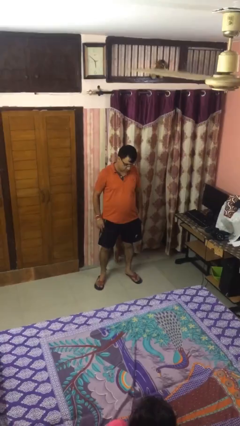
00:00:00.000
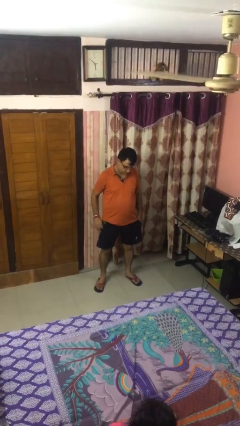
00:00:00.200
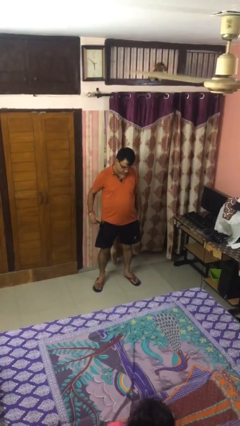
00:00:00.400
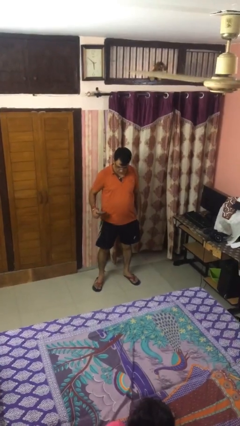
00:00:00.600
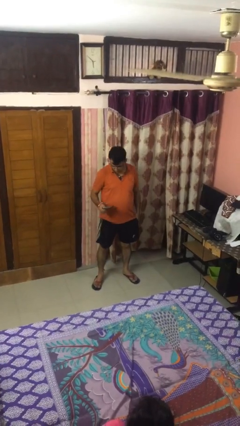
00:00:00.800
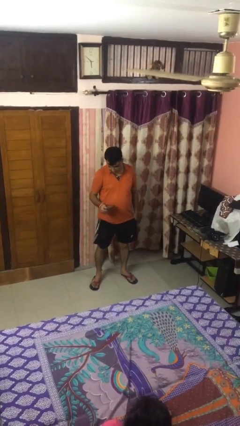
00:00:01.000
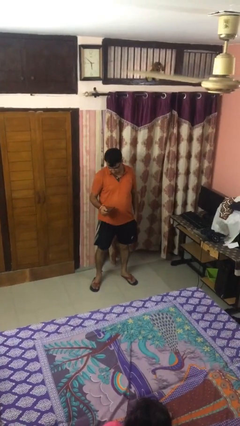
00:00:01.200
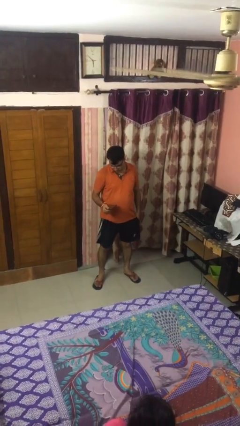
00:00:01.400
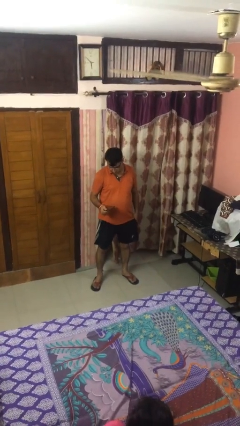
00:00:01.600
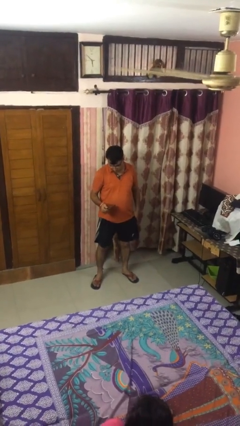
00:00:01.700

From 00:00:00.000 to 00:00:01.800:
person takes phone from pocket

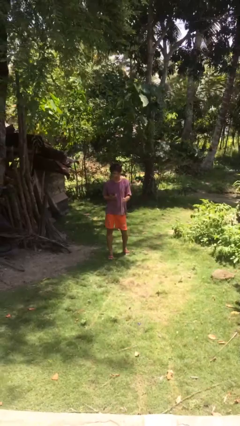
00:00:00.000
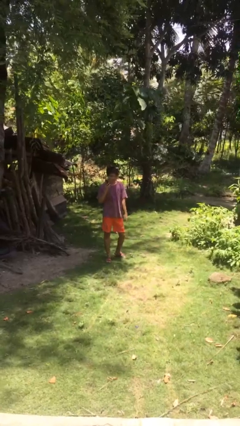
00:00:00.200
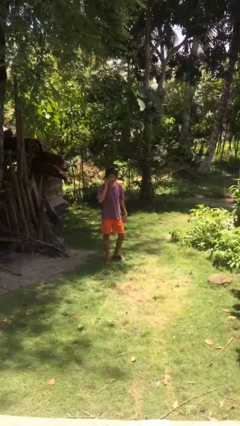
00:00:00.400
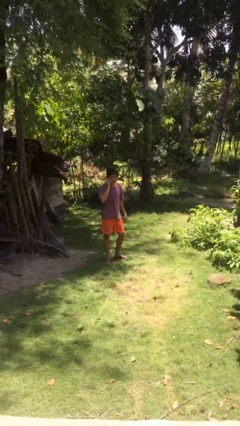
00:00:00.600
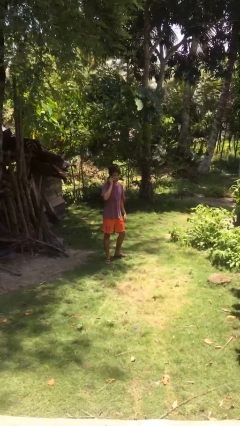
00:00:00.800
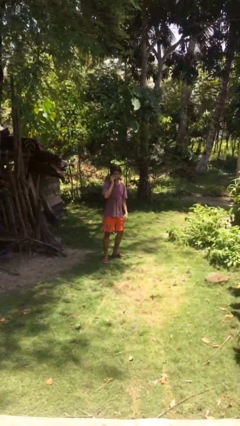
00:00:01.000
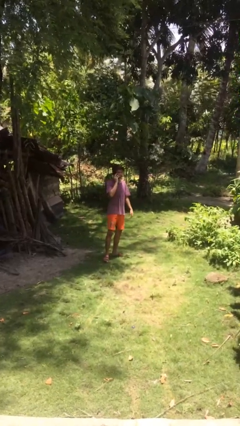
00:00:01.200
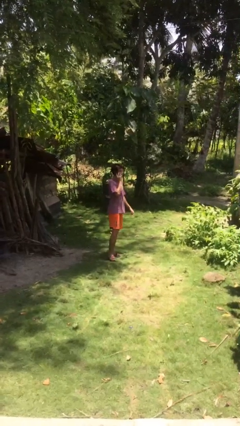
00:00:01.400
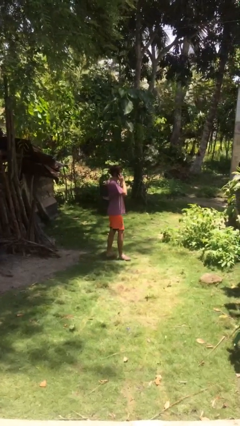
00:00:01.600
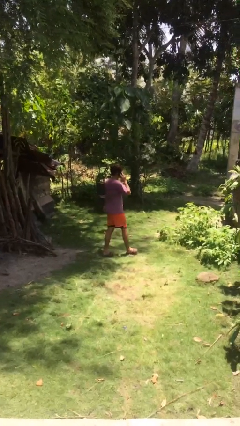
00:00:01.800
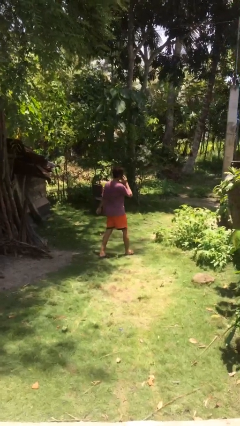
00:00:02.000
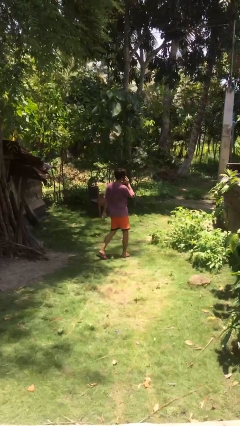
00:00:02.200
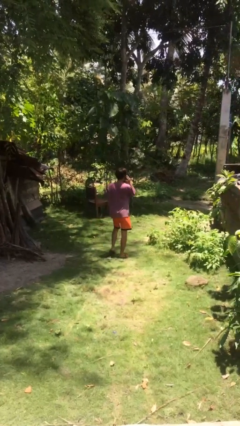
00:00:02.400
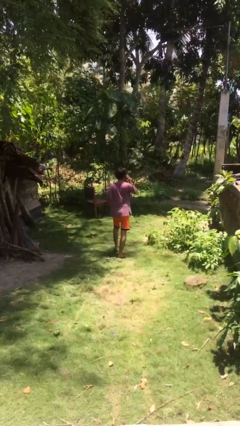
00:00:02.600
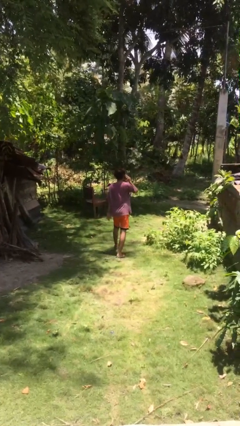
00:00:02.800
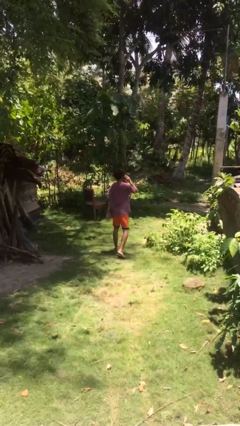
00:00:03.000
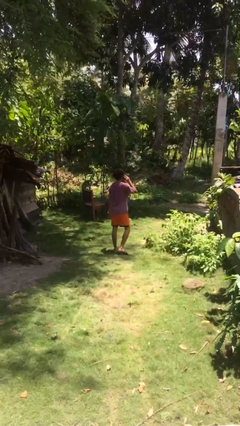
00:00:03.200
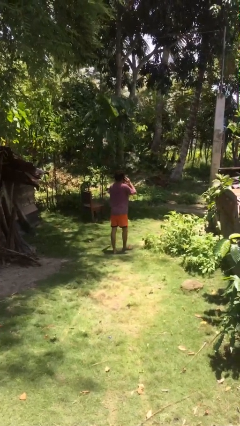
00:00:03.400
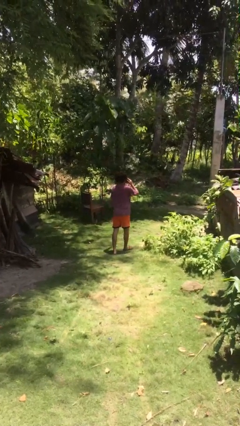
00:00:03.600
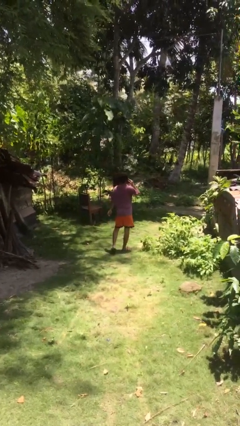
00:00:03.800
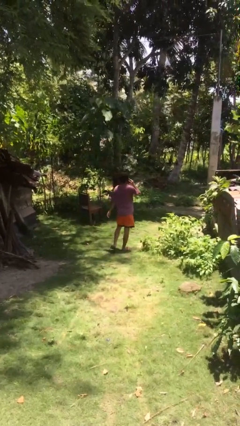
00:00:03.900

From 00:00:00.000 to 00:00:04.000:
person talks on phone

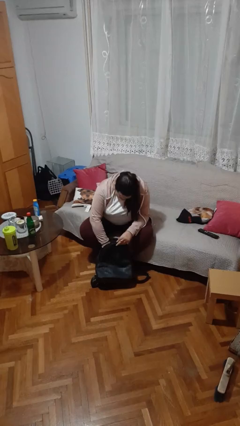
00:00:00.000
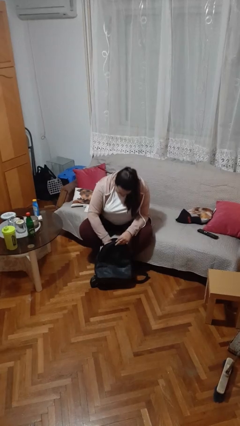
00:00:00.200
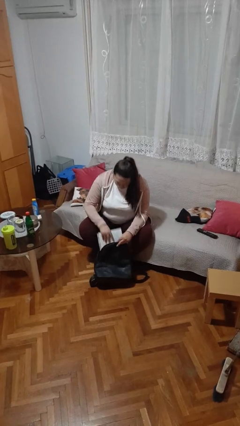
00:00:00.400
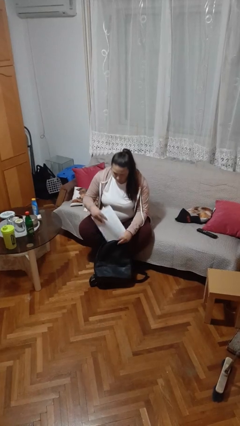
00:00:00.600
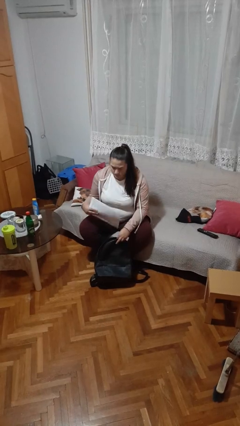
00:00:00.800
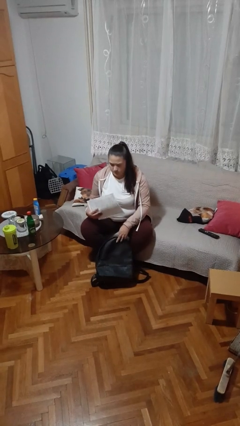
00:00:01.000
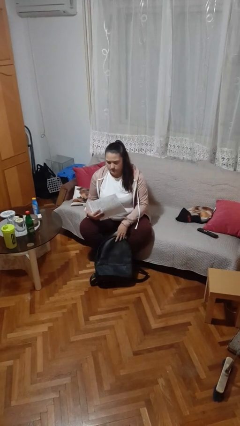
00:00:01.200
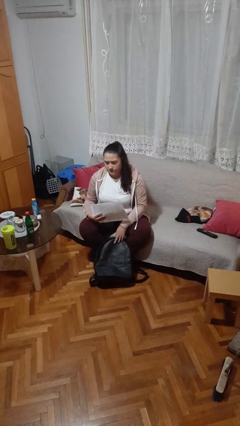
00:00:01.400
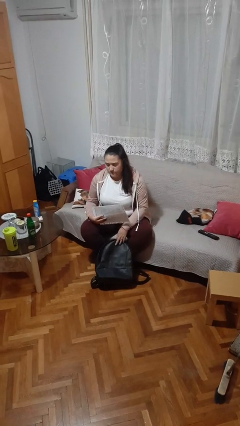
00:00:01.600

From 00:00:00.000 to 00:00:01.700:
person takes object from backpack

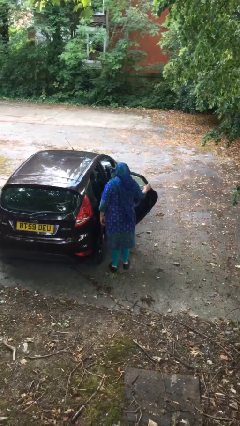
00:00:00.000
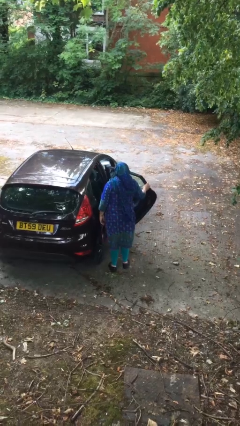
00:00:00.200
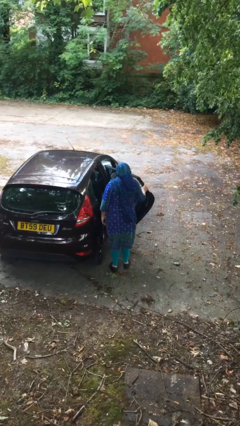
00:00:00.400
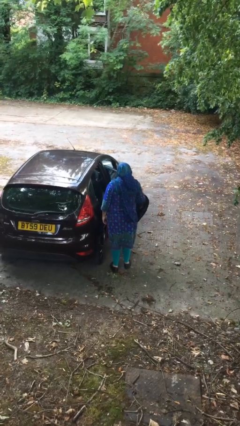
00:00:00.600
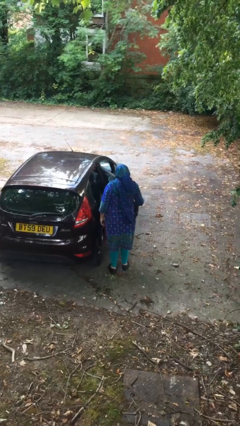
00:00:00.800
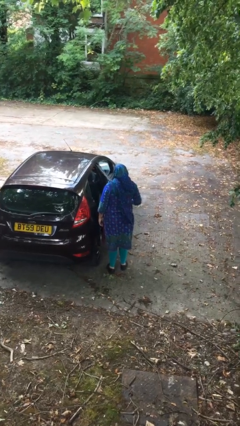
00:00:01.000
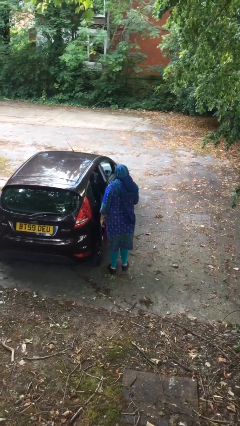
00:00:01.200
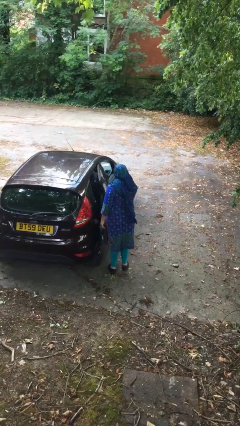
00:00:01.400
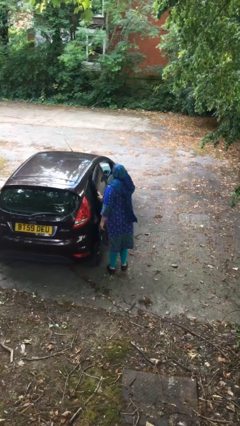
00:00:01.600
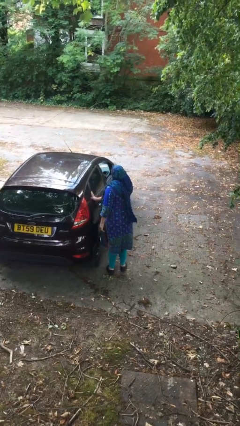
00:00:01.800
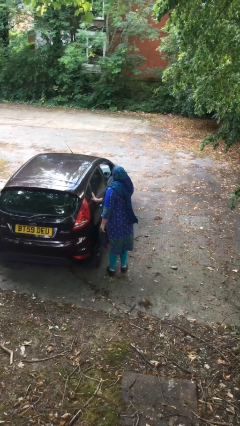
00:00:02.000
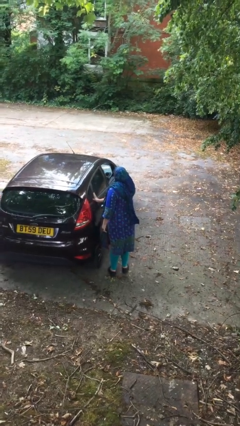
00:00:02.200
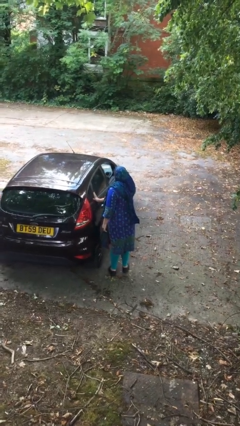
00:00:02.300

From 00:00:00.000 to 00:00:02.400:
person closes car door

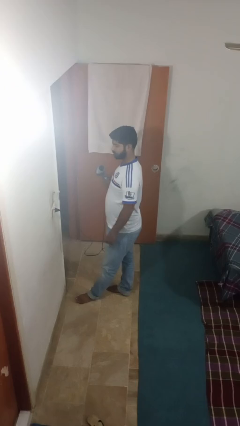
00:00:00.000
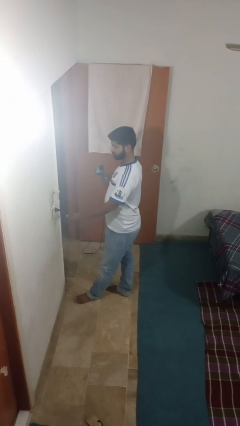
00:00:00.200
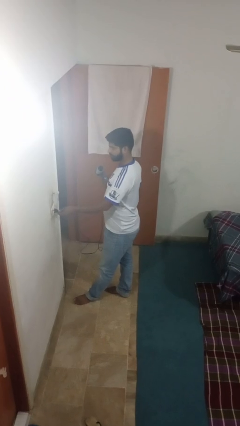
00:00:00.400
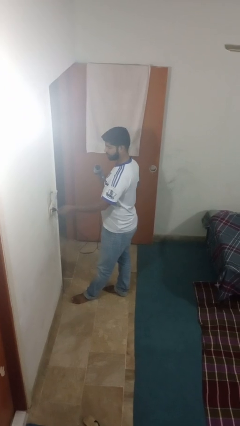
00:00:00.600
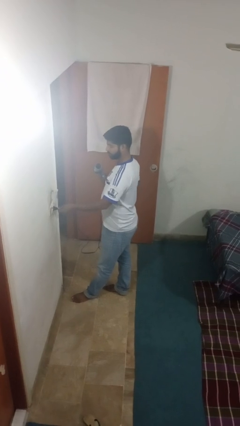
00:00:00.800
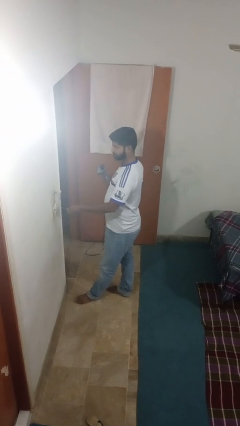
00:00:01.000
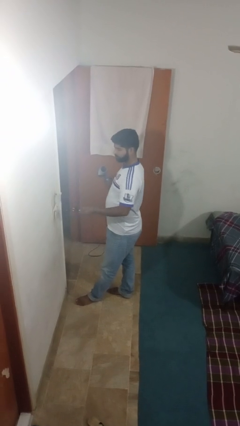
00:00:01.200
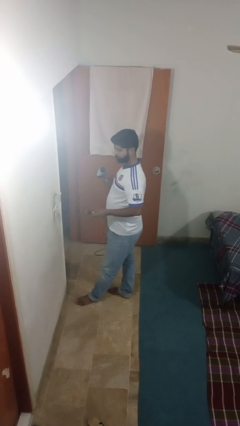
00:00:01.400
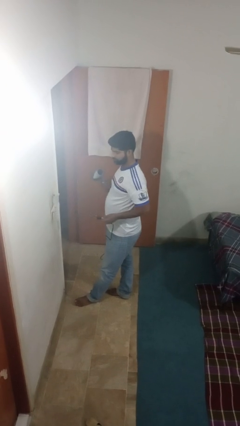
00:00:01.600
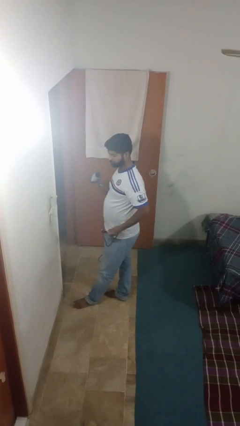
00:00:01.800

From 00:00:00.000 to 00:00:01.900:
person unplugs from electrical socket

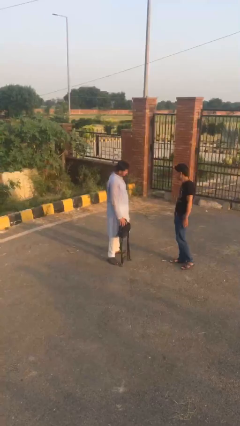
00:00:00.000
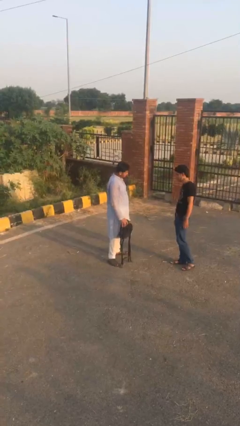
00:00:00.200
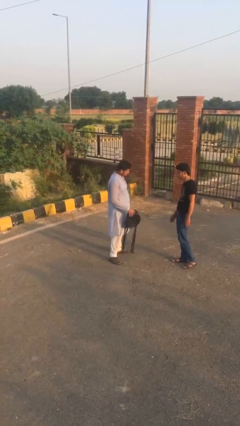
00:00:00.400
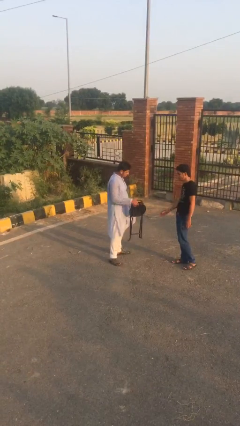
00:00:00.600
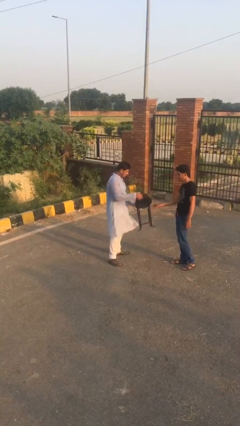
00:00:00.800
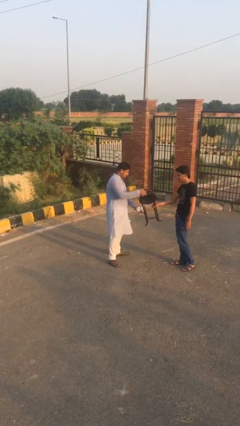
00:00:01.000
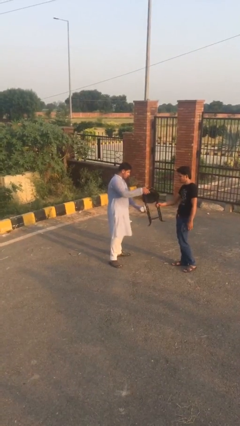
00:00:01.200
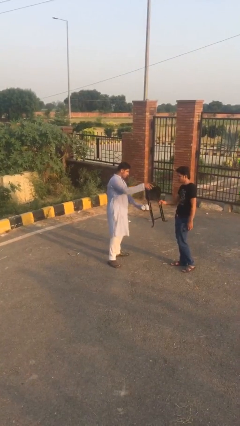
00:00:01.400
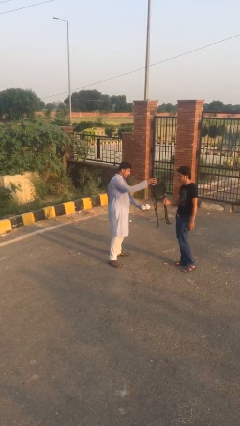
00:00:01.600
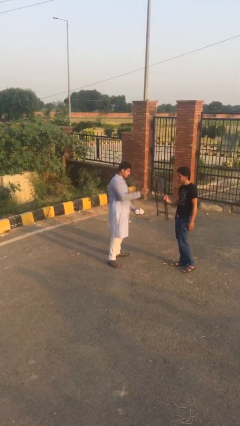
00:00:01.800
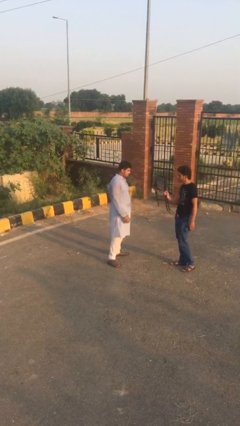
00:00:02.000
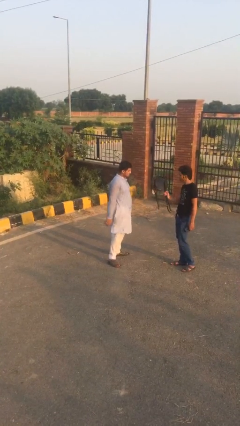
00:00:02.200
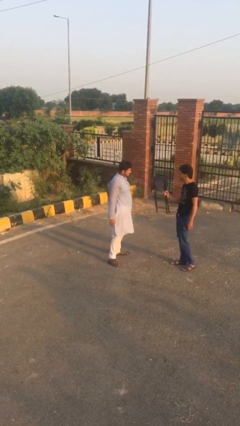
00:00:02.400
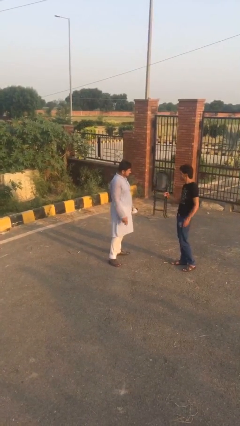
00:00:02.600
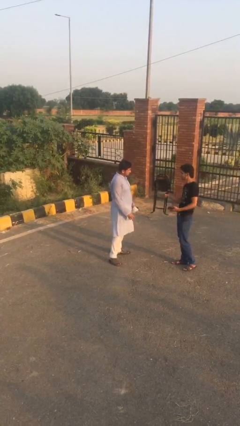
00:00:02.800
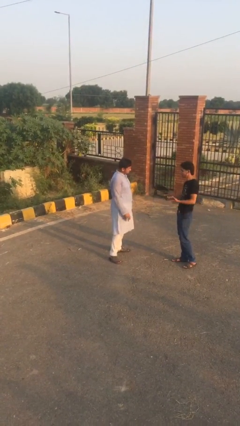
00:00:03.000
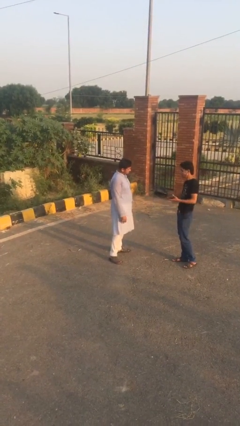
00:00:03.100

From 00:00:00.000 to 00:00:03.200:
person transfers object to person

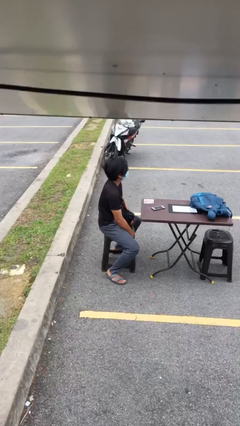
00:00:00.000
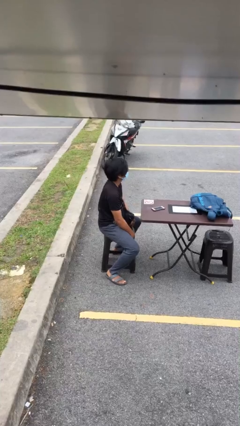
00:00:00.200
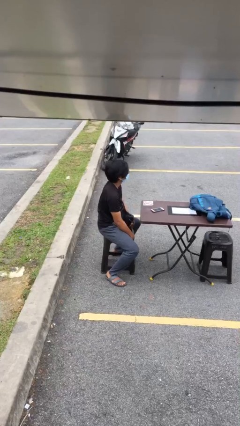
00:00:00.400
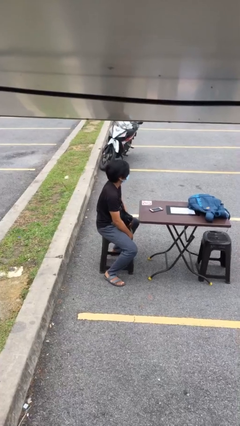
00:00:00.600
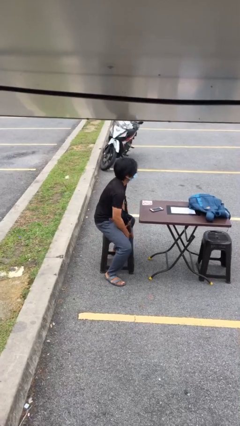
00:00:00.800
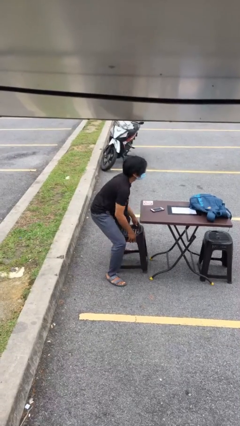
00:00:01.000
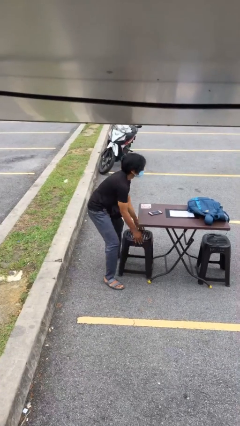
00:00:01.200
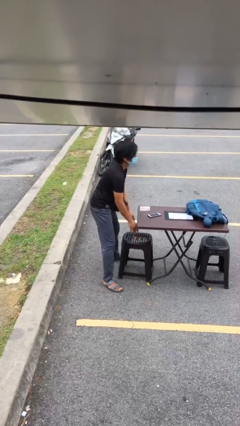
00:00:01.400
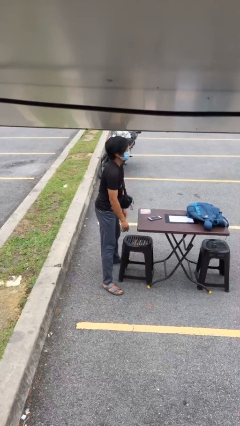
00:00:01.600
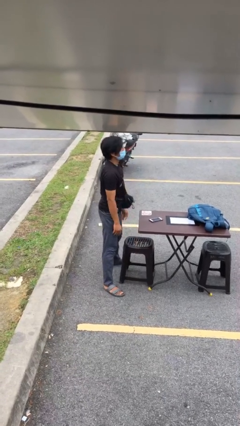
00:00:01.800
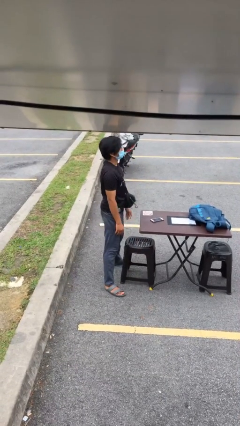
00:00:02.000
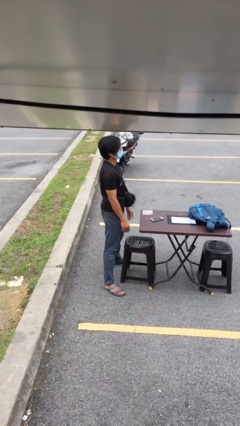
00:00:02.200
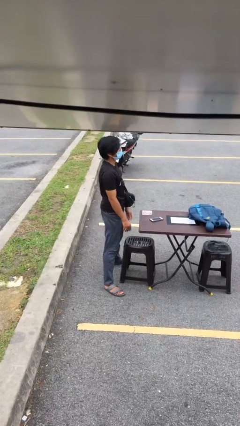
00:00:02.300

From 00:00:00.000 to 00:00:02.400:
person stands up
